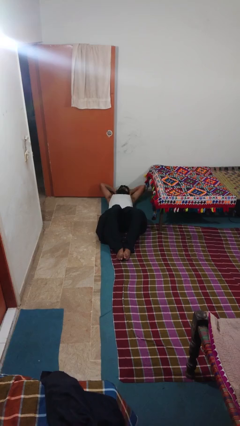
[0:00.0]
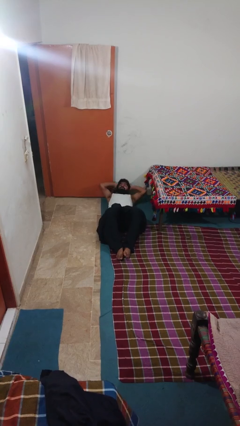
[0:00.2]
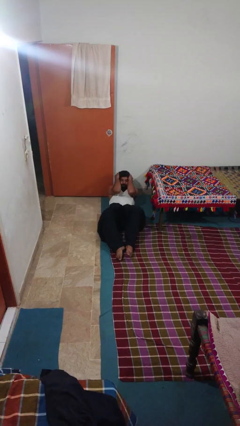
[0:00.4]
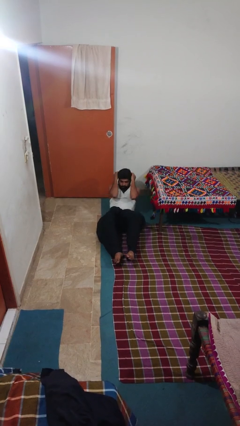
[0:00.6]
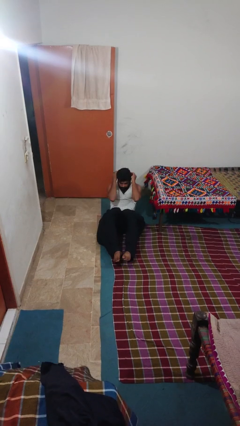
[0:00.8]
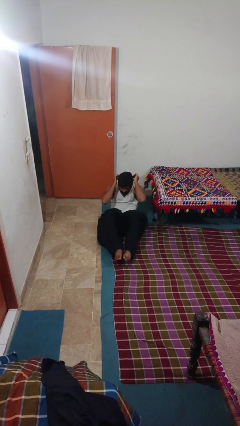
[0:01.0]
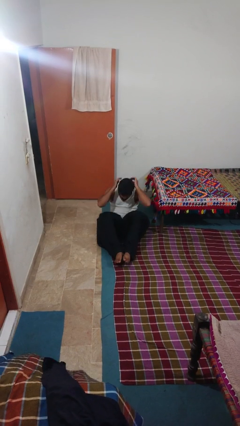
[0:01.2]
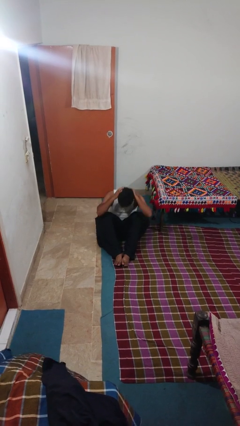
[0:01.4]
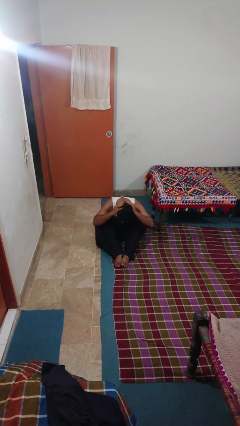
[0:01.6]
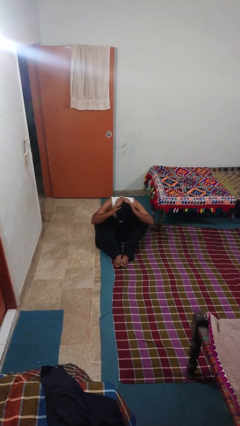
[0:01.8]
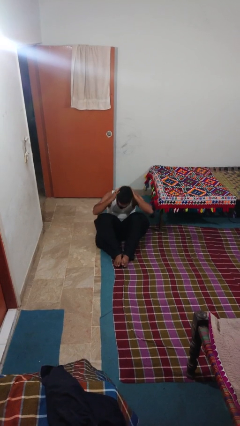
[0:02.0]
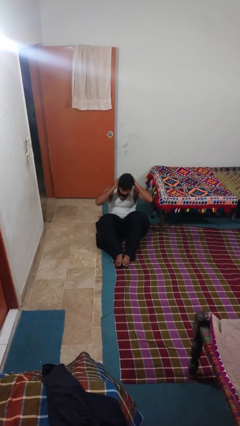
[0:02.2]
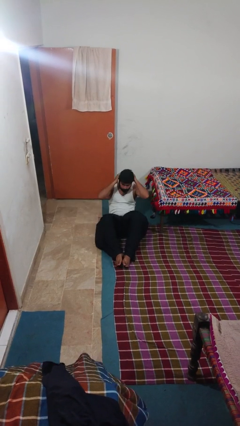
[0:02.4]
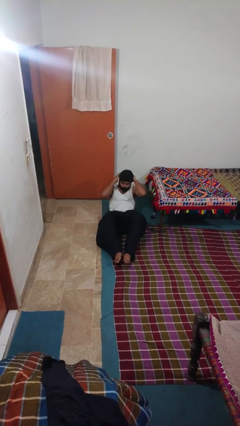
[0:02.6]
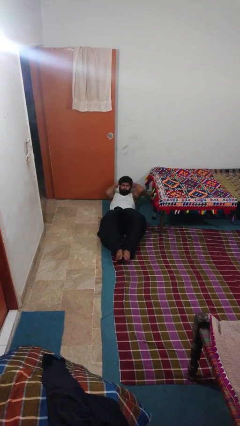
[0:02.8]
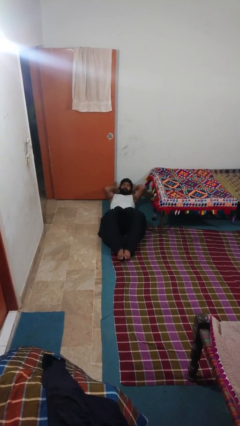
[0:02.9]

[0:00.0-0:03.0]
person exercises with situp

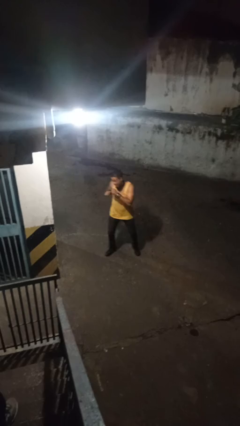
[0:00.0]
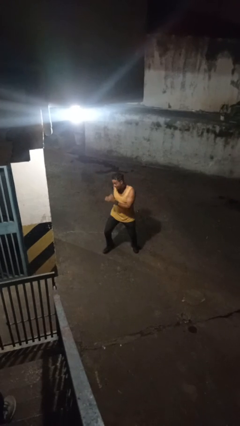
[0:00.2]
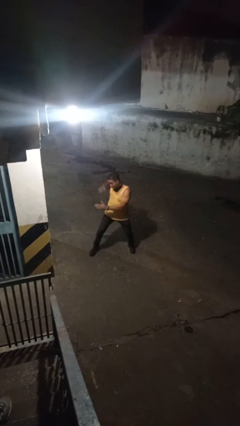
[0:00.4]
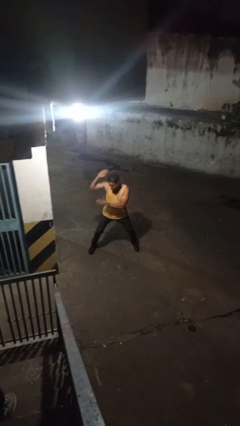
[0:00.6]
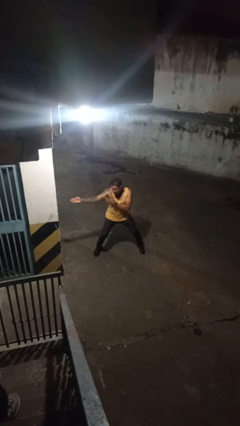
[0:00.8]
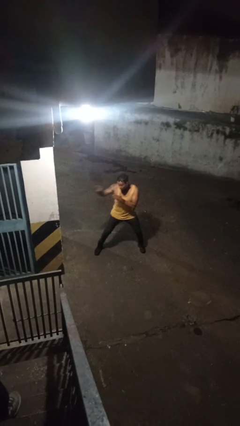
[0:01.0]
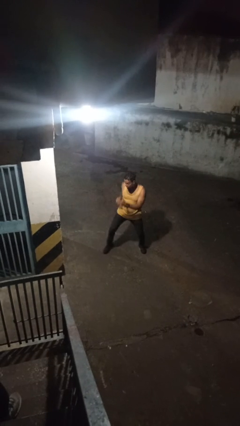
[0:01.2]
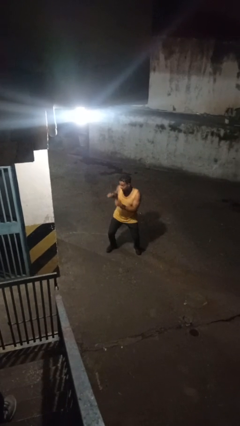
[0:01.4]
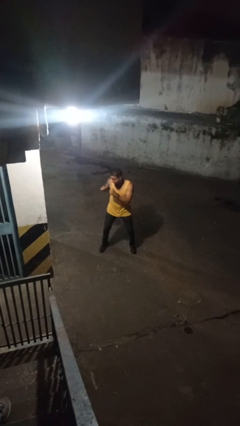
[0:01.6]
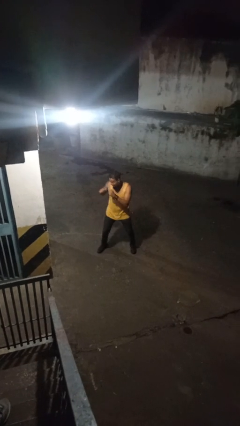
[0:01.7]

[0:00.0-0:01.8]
person karate chop

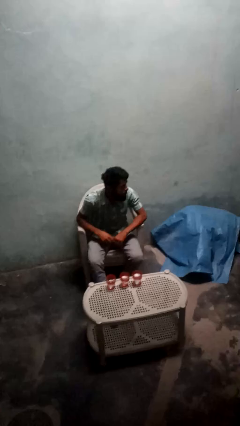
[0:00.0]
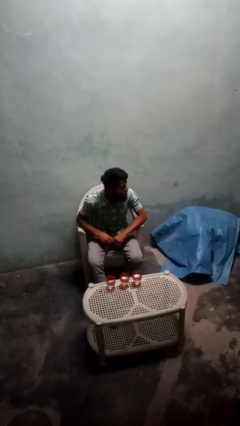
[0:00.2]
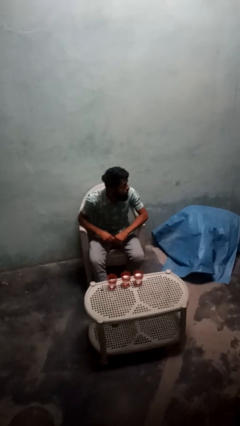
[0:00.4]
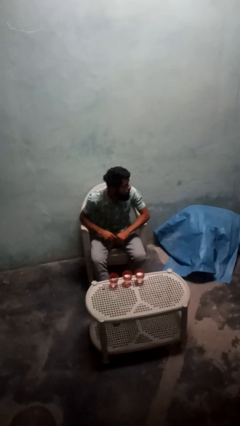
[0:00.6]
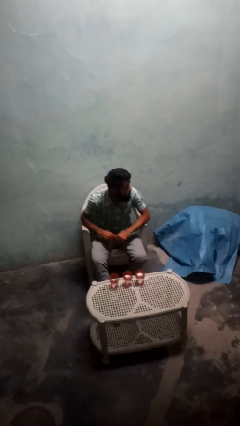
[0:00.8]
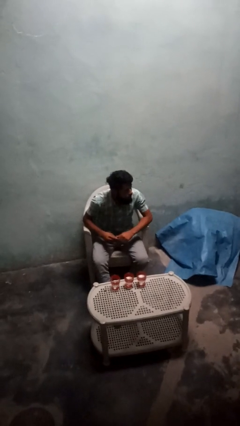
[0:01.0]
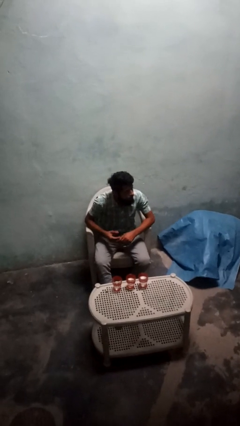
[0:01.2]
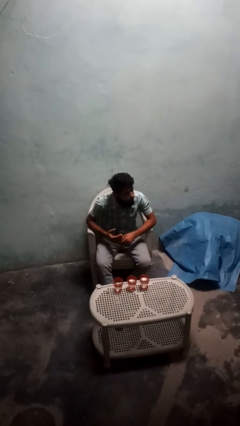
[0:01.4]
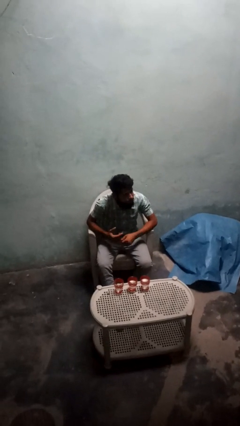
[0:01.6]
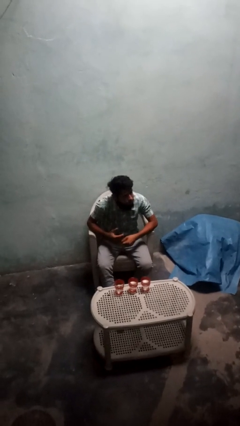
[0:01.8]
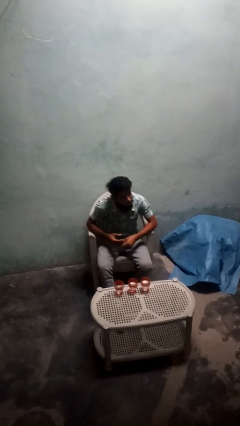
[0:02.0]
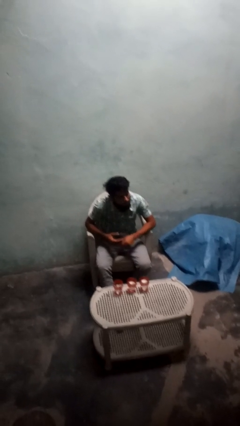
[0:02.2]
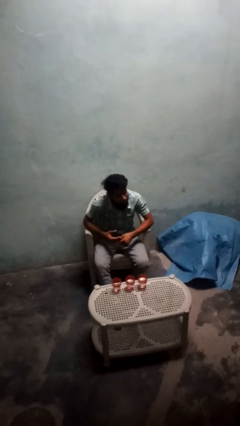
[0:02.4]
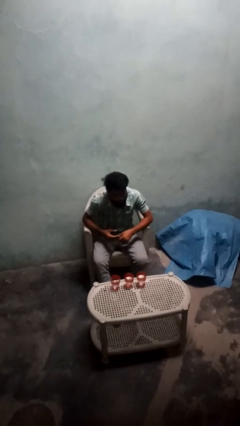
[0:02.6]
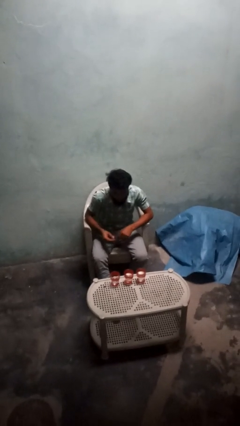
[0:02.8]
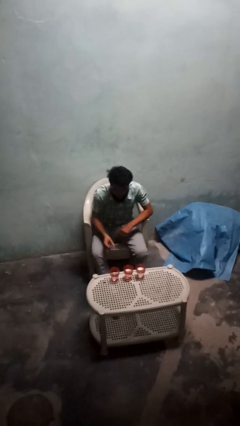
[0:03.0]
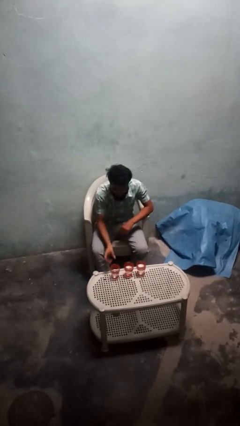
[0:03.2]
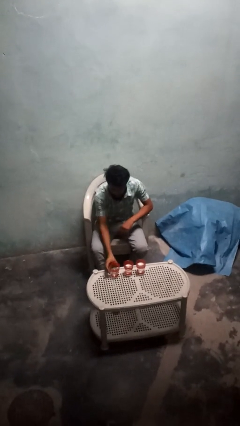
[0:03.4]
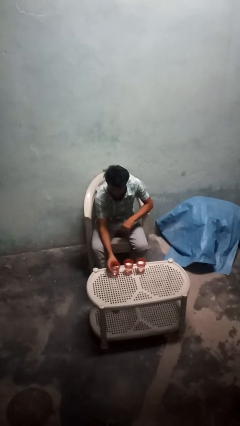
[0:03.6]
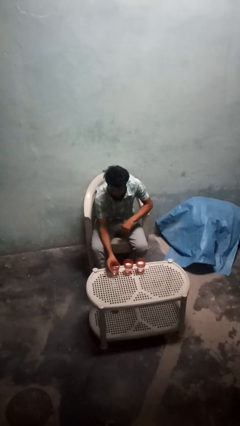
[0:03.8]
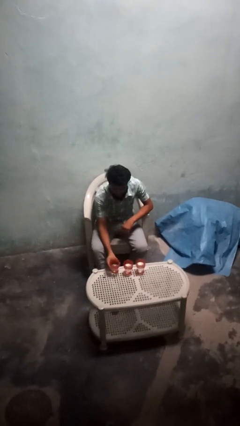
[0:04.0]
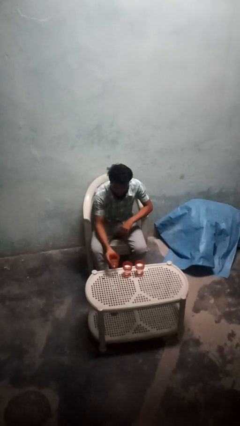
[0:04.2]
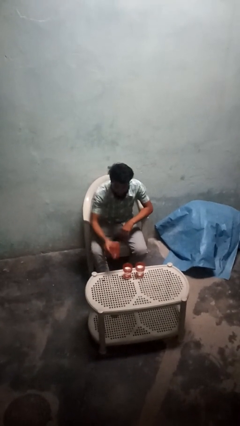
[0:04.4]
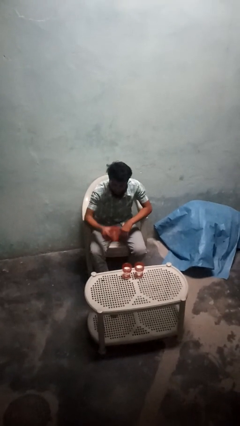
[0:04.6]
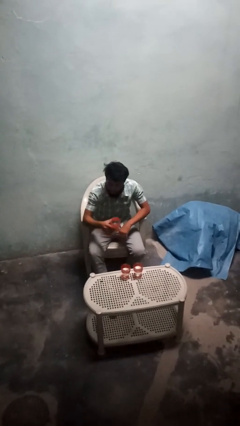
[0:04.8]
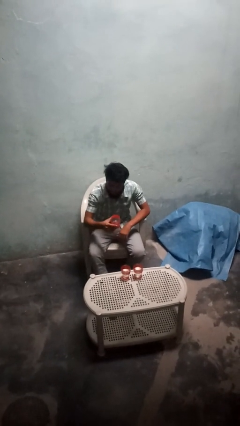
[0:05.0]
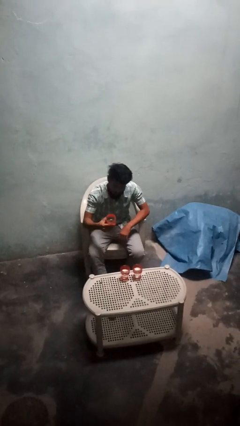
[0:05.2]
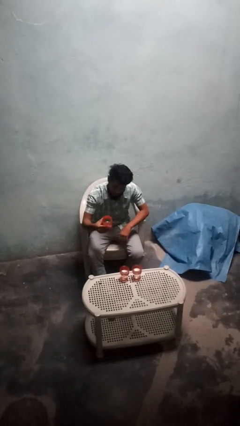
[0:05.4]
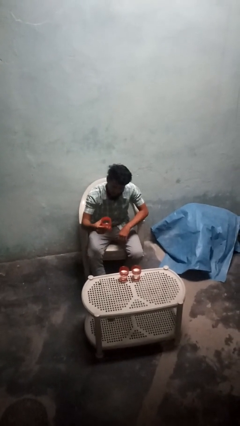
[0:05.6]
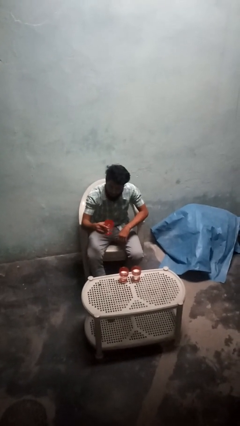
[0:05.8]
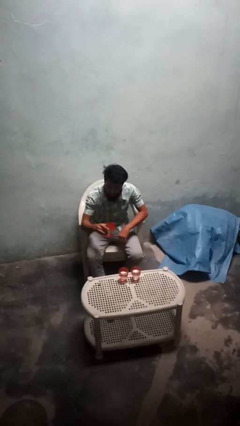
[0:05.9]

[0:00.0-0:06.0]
person picks up object from table

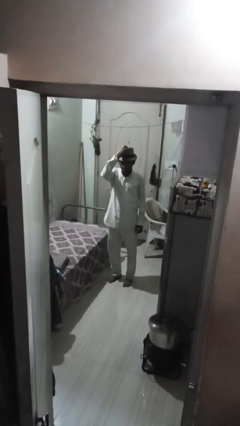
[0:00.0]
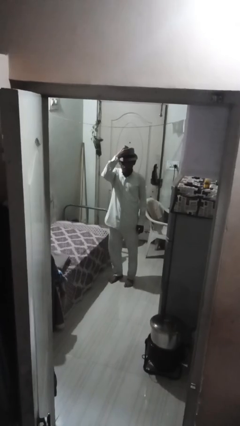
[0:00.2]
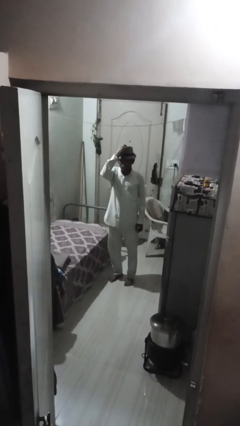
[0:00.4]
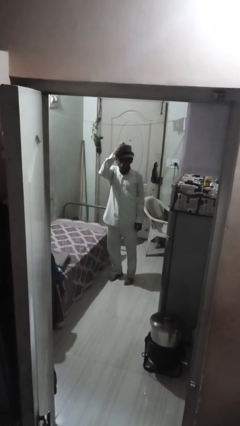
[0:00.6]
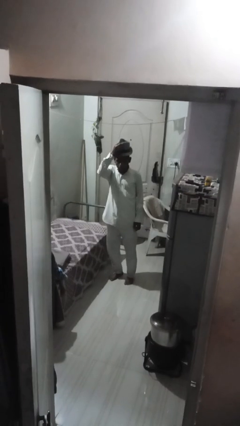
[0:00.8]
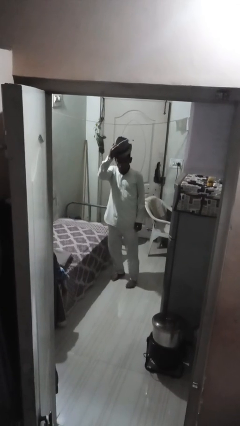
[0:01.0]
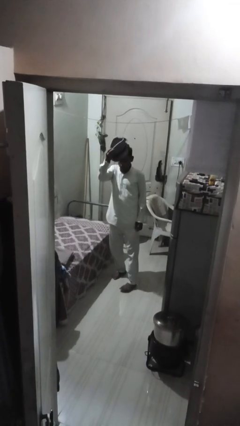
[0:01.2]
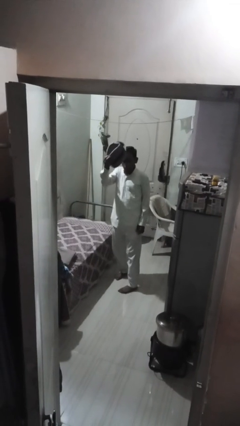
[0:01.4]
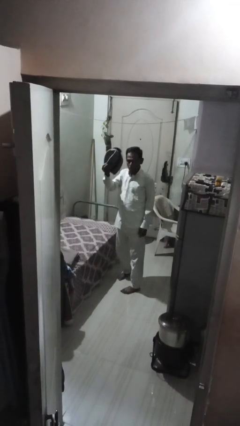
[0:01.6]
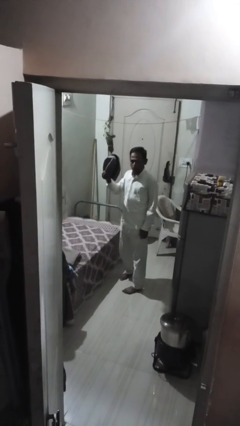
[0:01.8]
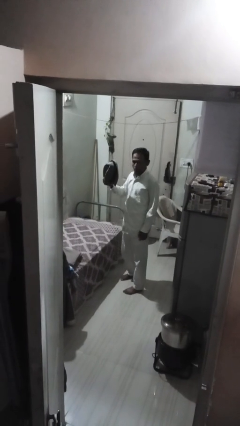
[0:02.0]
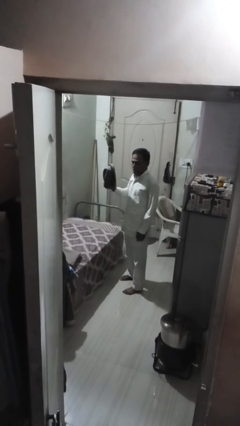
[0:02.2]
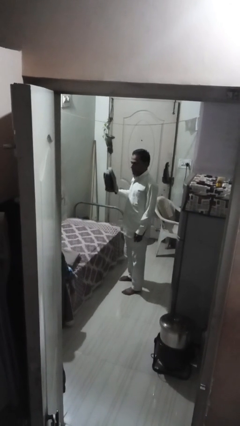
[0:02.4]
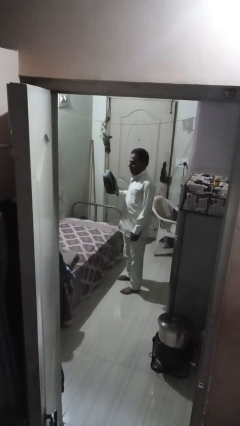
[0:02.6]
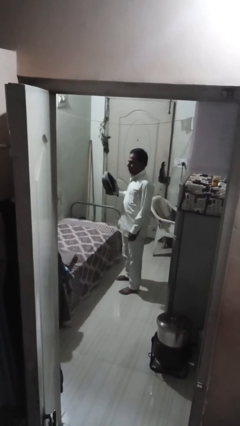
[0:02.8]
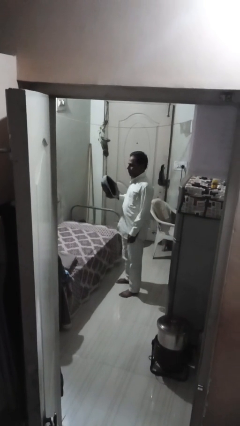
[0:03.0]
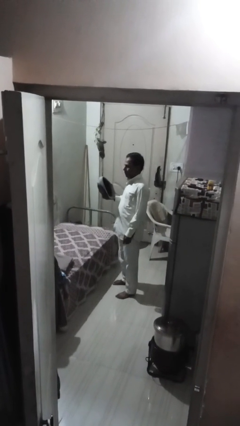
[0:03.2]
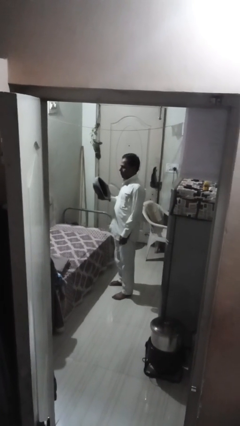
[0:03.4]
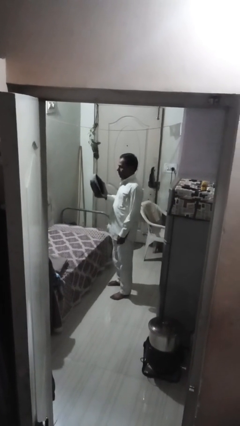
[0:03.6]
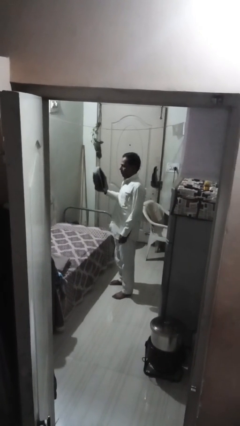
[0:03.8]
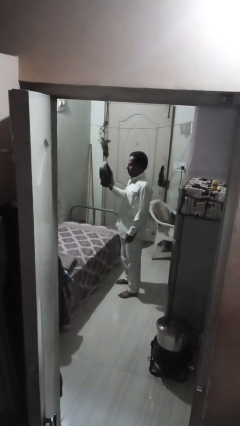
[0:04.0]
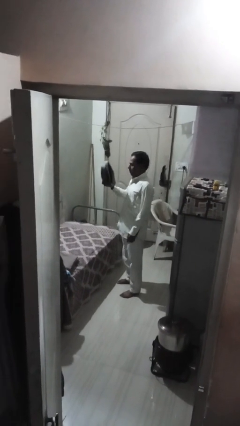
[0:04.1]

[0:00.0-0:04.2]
person takes off hat

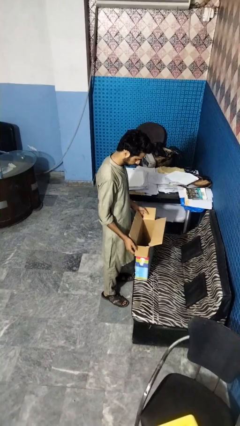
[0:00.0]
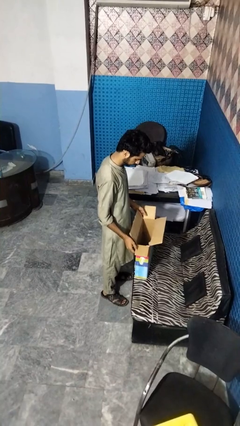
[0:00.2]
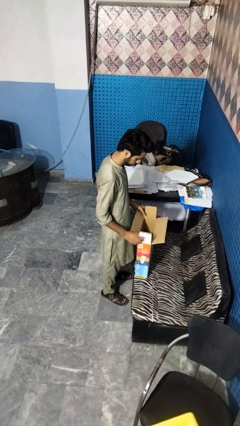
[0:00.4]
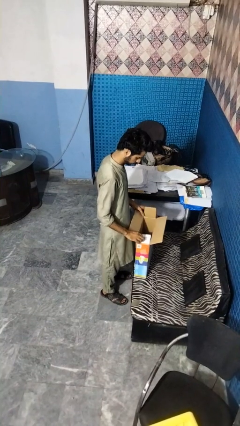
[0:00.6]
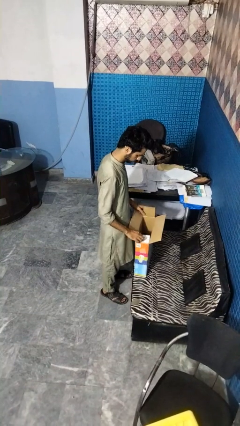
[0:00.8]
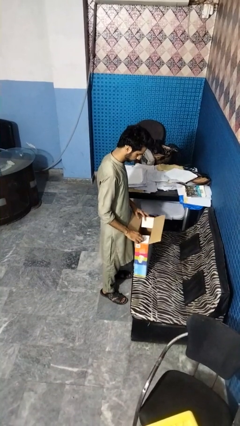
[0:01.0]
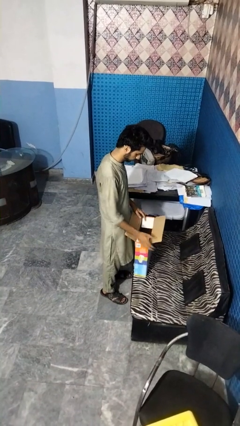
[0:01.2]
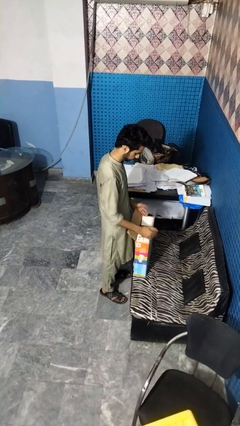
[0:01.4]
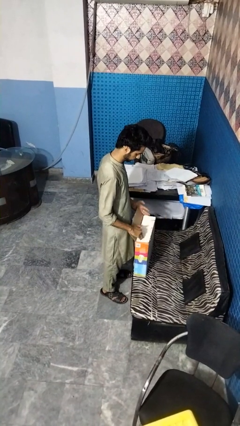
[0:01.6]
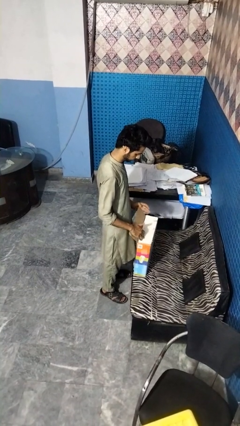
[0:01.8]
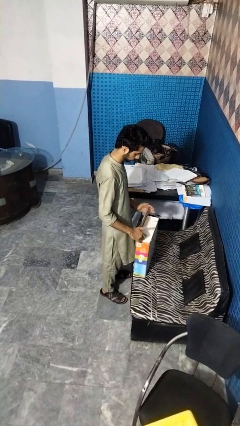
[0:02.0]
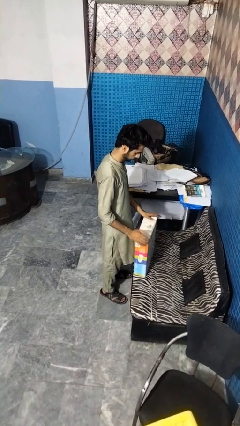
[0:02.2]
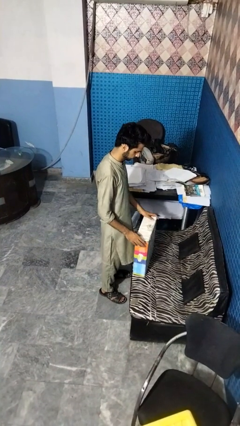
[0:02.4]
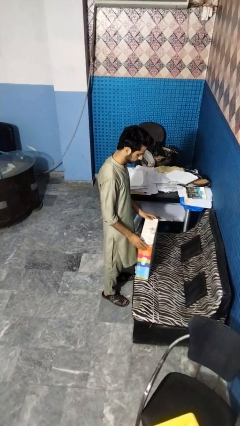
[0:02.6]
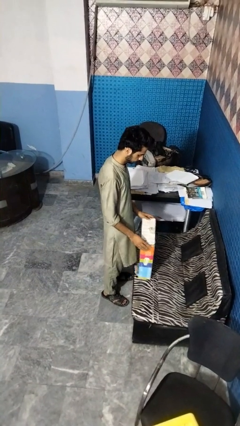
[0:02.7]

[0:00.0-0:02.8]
person closes box
